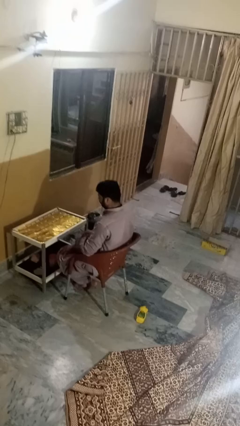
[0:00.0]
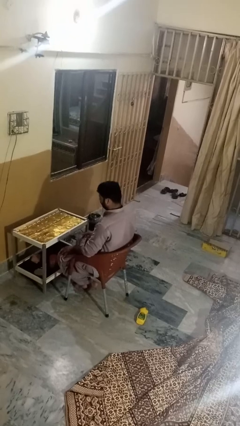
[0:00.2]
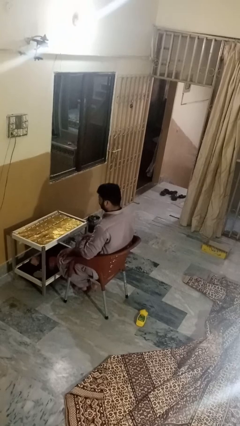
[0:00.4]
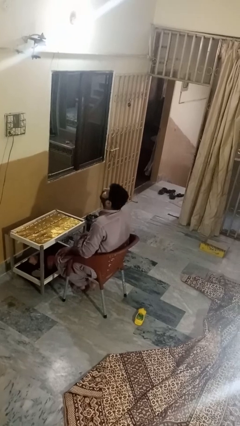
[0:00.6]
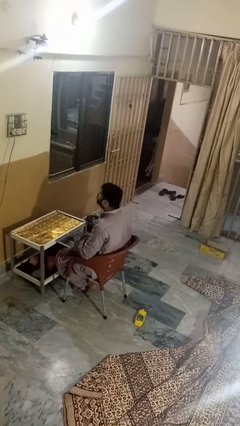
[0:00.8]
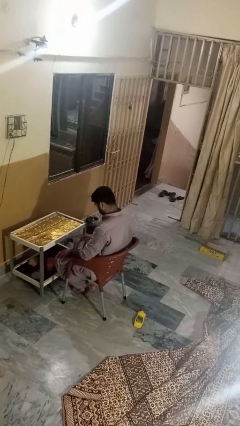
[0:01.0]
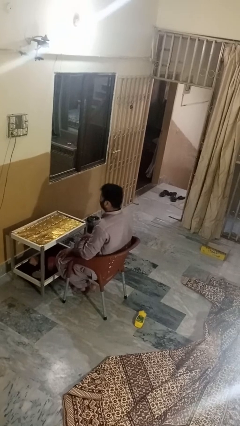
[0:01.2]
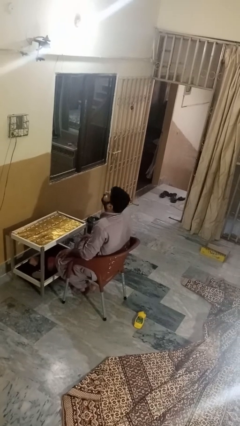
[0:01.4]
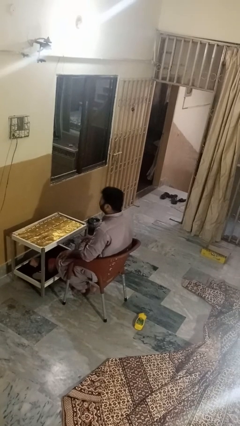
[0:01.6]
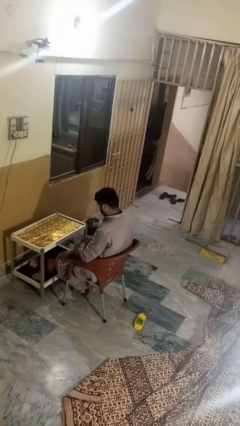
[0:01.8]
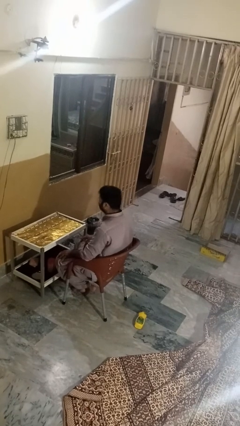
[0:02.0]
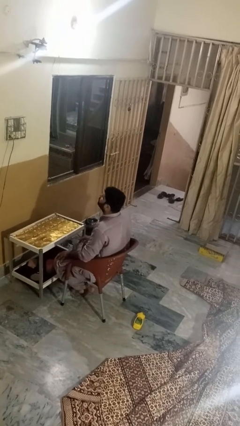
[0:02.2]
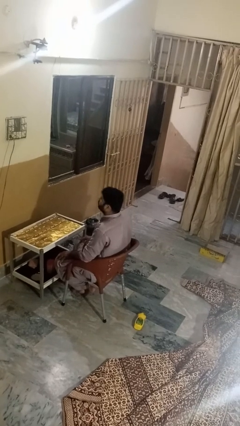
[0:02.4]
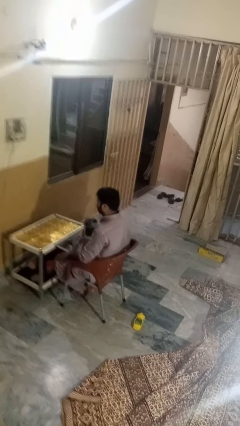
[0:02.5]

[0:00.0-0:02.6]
person nods head

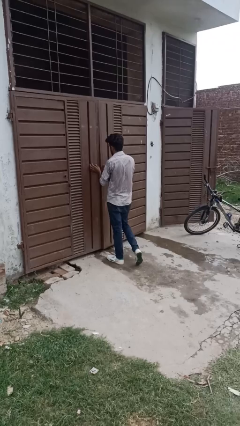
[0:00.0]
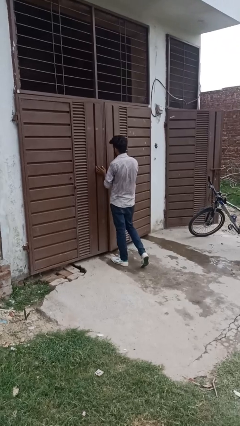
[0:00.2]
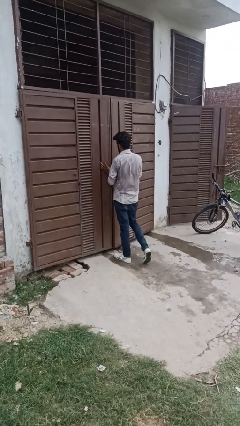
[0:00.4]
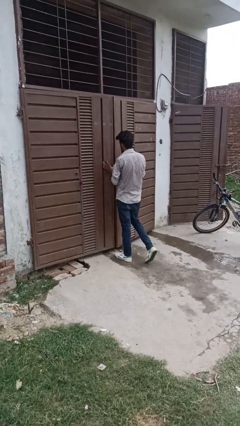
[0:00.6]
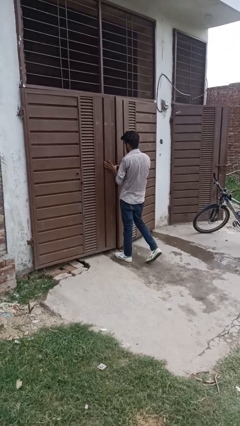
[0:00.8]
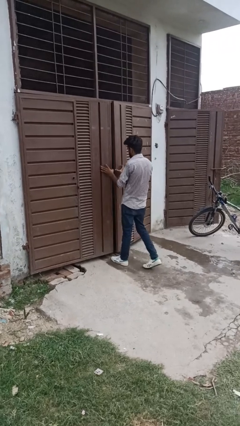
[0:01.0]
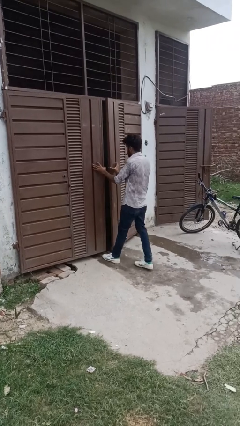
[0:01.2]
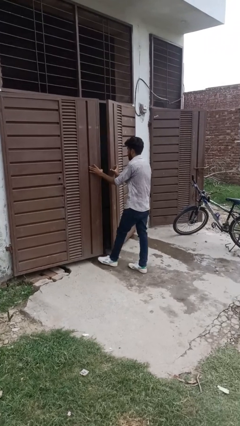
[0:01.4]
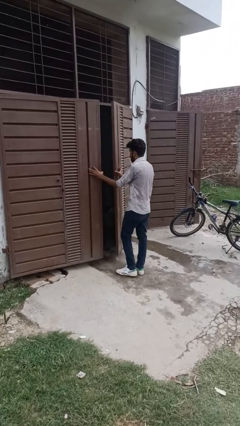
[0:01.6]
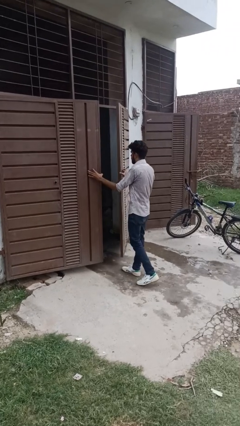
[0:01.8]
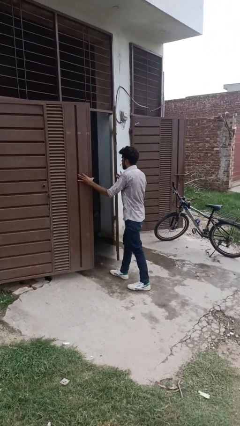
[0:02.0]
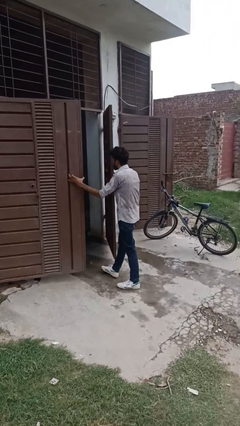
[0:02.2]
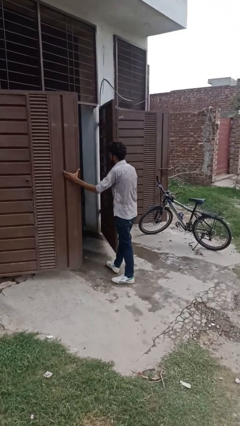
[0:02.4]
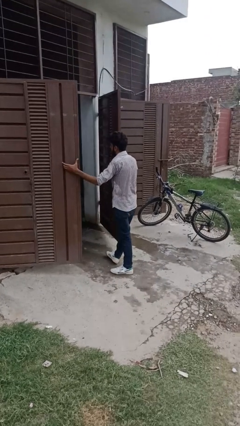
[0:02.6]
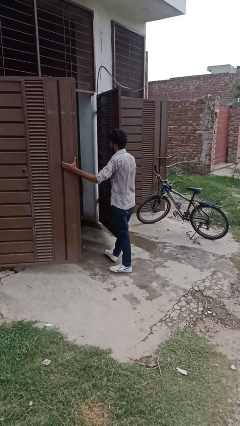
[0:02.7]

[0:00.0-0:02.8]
person opens gate

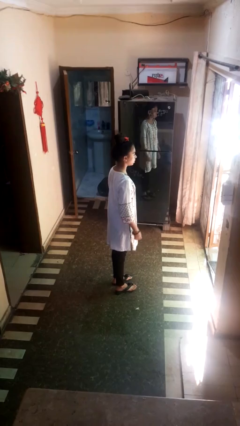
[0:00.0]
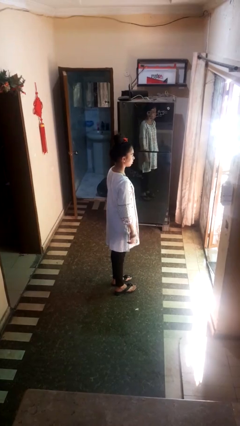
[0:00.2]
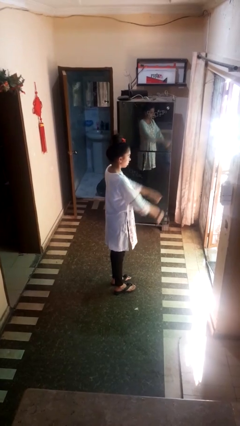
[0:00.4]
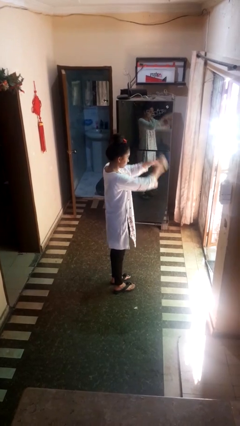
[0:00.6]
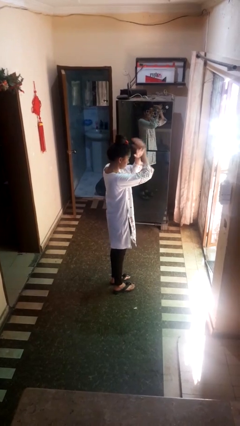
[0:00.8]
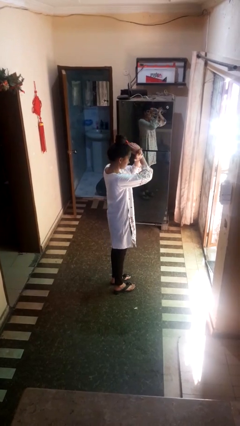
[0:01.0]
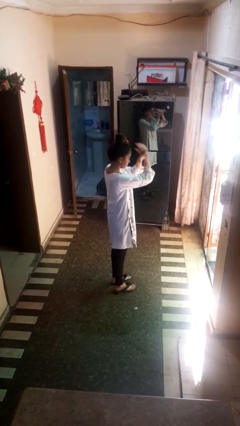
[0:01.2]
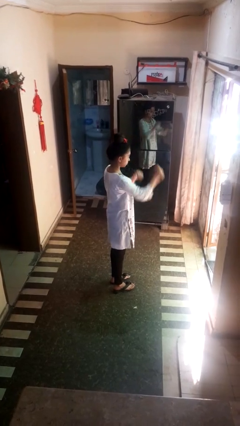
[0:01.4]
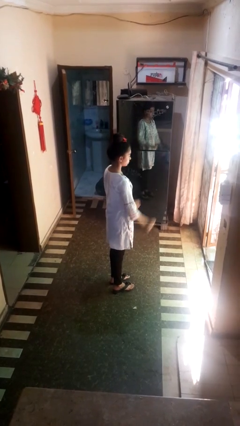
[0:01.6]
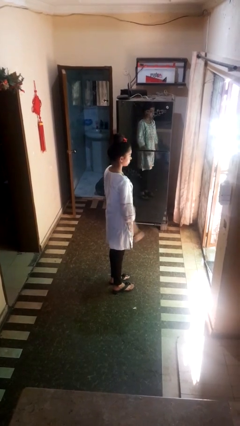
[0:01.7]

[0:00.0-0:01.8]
person gestures arms x

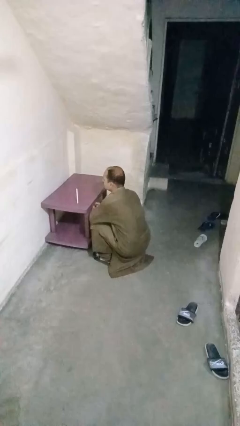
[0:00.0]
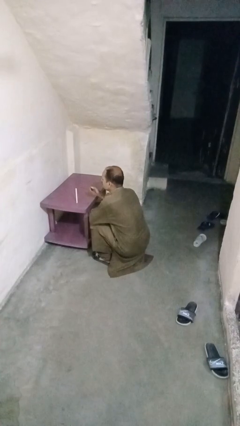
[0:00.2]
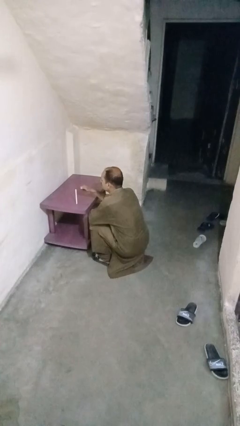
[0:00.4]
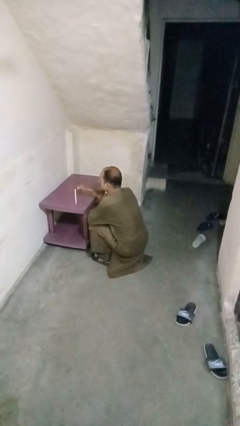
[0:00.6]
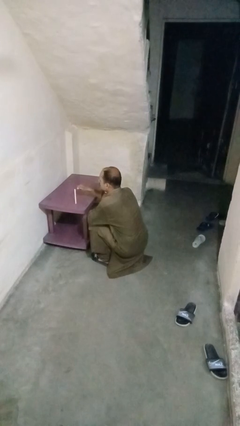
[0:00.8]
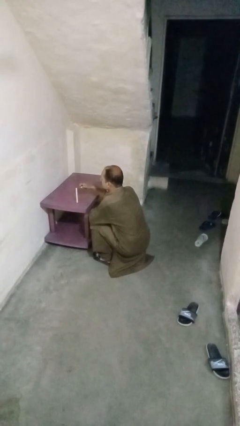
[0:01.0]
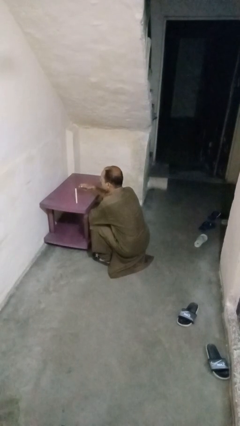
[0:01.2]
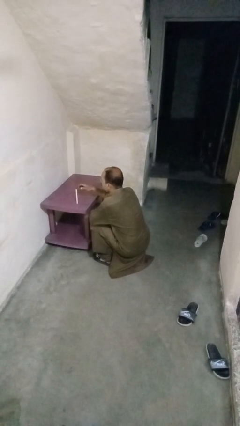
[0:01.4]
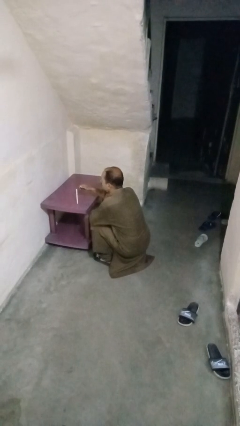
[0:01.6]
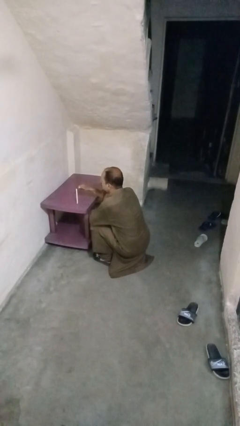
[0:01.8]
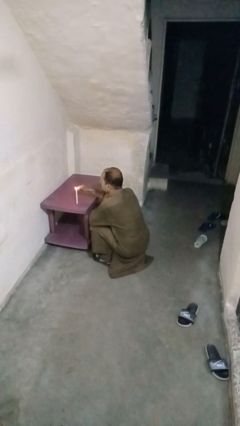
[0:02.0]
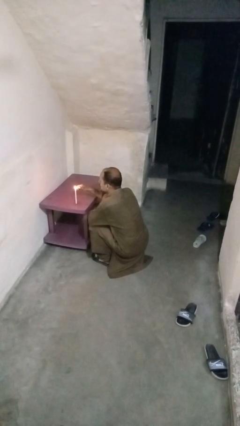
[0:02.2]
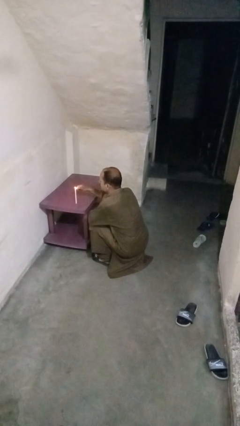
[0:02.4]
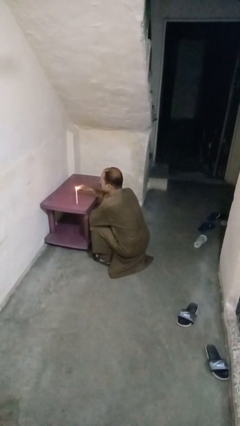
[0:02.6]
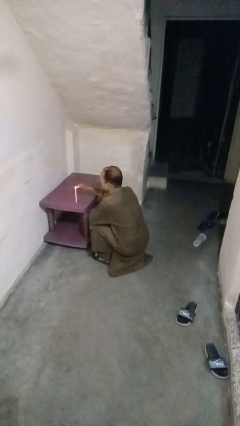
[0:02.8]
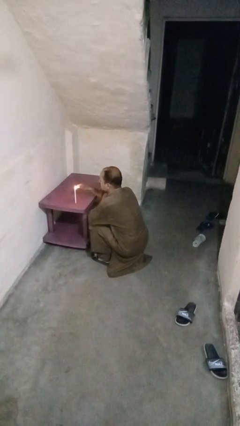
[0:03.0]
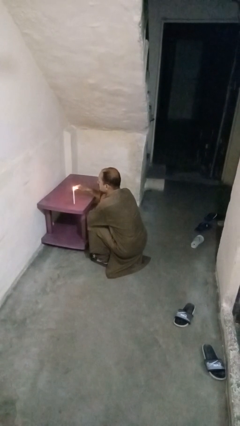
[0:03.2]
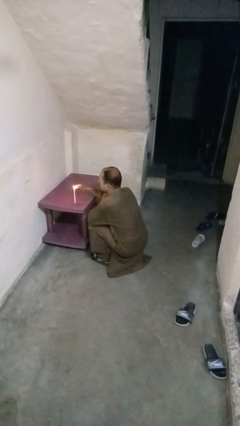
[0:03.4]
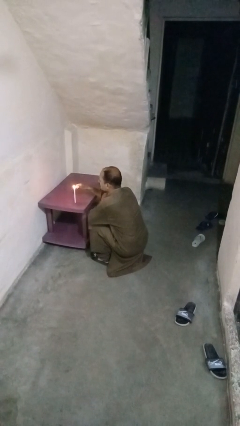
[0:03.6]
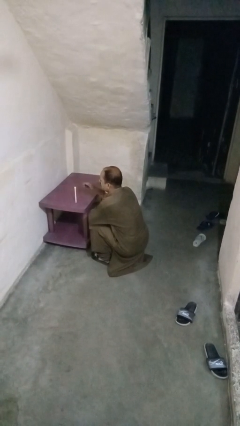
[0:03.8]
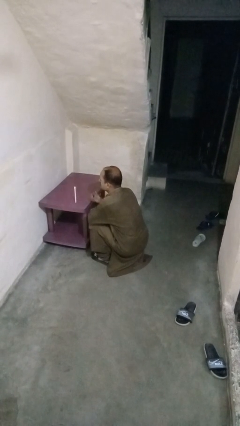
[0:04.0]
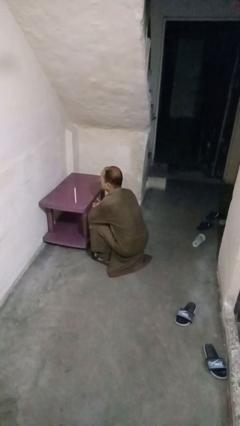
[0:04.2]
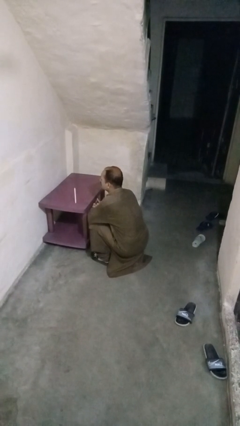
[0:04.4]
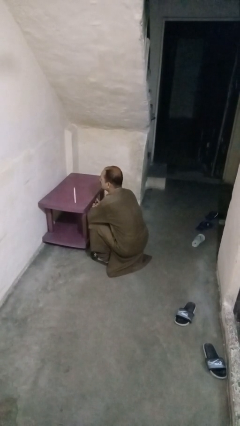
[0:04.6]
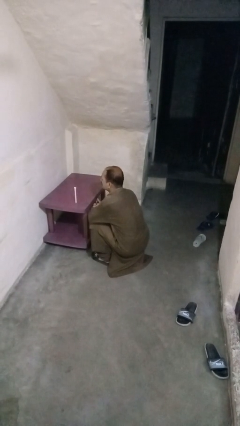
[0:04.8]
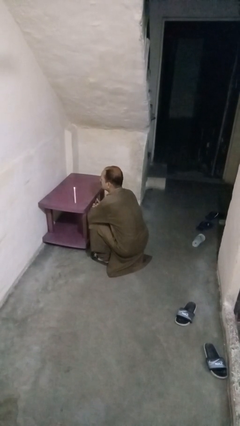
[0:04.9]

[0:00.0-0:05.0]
person lights candle

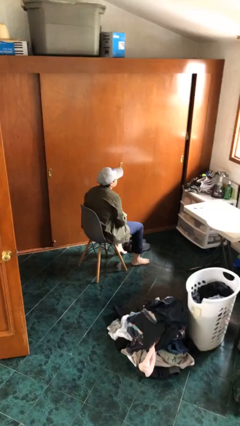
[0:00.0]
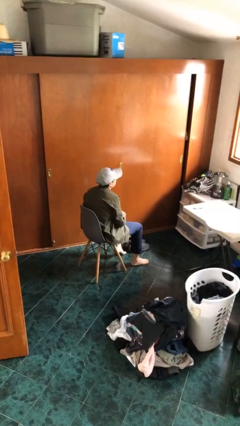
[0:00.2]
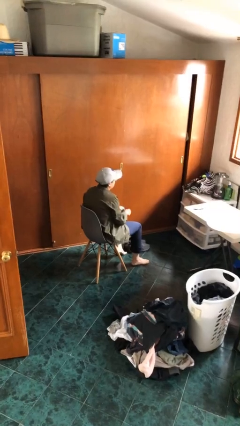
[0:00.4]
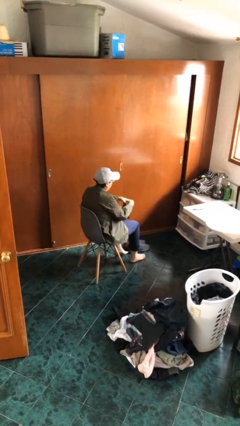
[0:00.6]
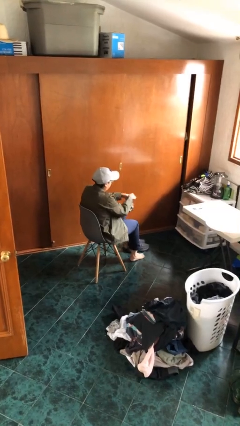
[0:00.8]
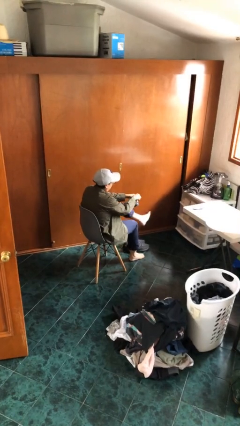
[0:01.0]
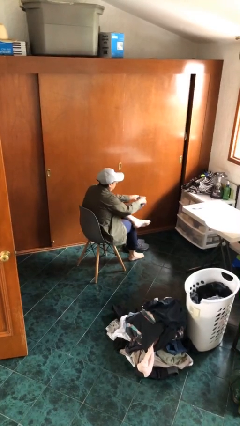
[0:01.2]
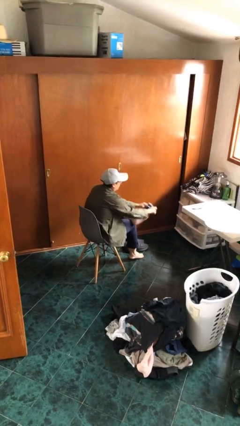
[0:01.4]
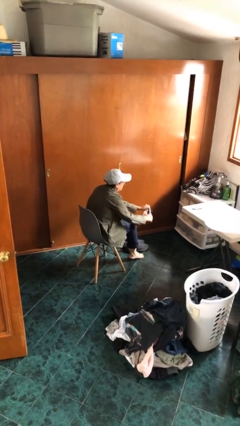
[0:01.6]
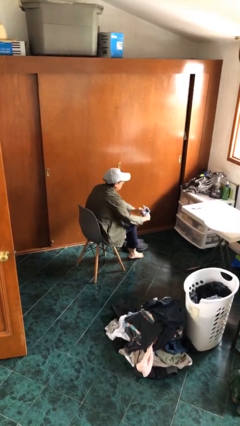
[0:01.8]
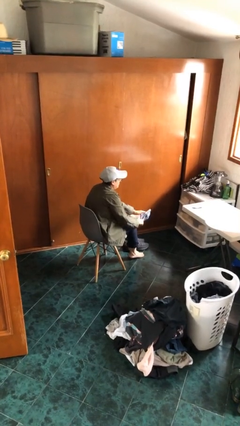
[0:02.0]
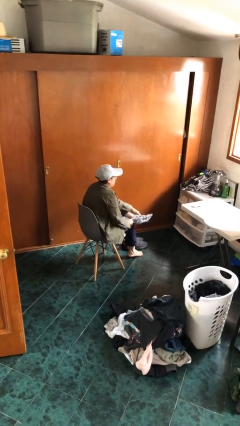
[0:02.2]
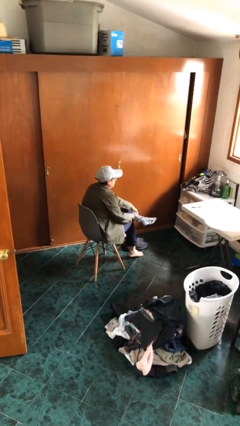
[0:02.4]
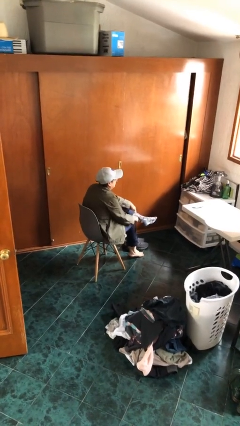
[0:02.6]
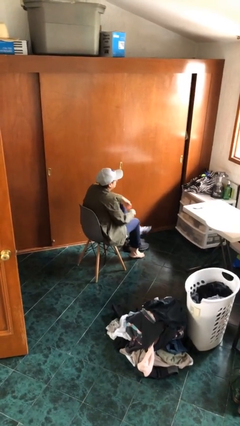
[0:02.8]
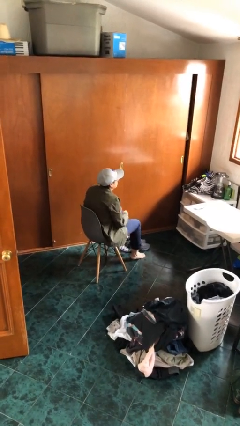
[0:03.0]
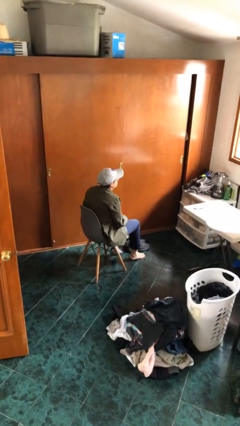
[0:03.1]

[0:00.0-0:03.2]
person puts on socks

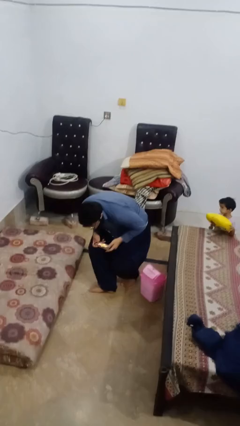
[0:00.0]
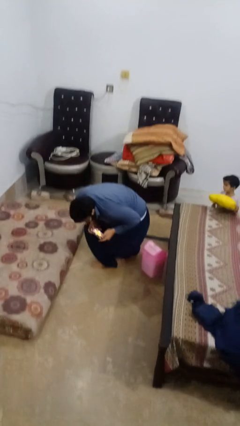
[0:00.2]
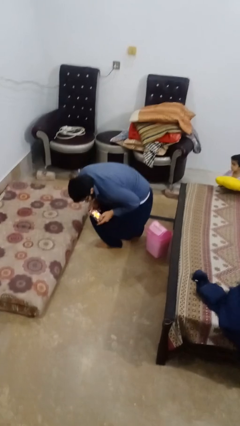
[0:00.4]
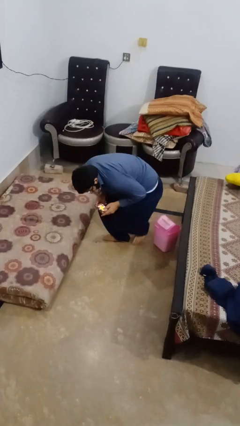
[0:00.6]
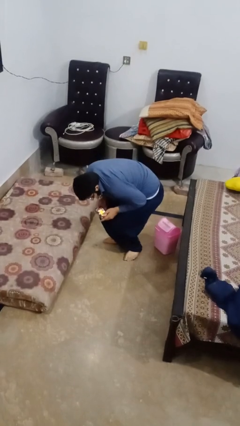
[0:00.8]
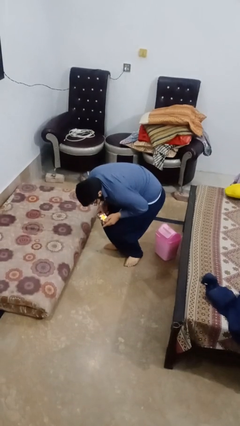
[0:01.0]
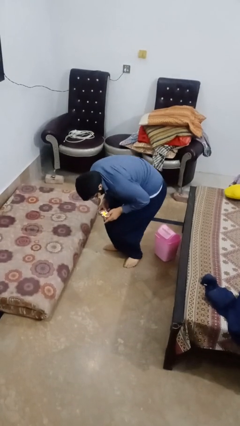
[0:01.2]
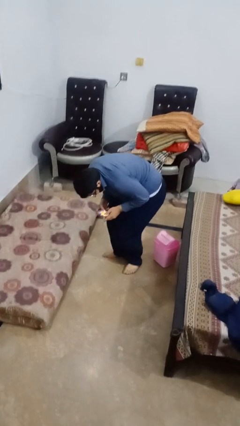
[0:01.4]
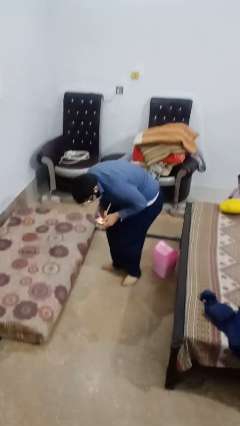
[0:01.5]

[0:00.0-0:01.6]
person lies down on floor
